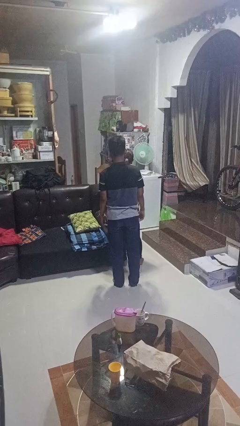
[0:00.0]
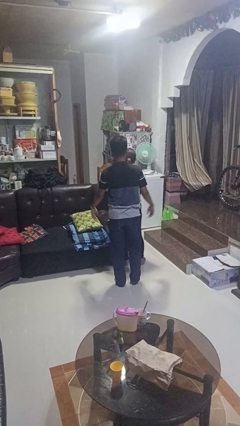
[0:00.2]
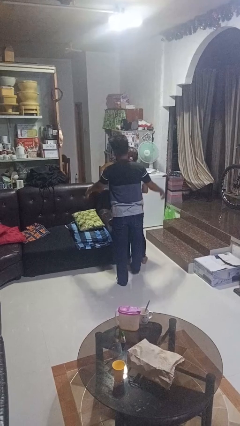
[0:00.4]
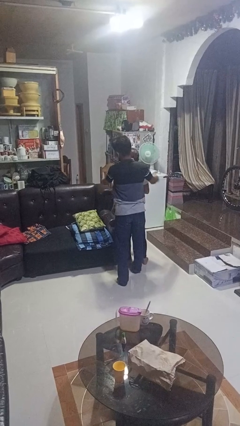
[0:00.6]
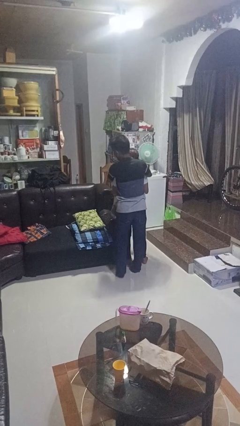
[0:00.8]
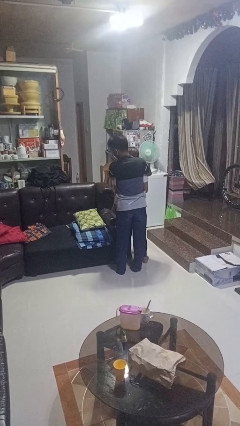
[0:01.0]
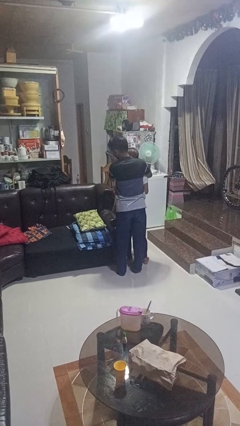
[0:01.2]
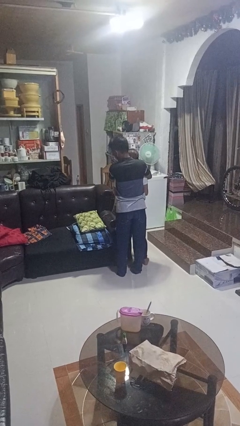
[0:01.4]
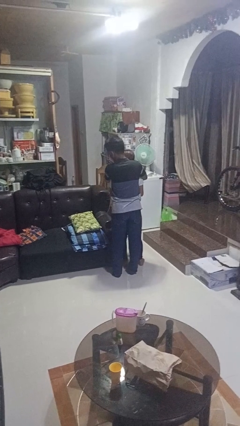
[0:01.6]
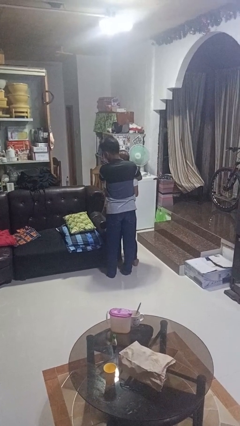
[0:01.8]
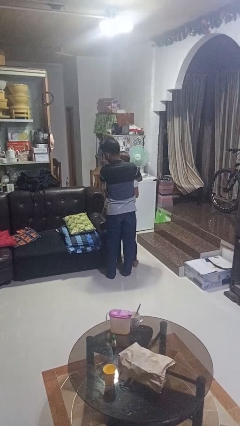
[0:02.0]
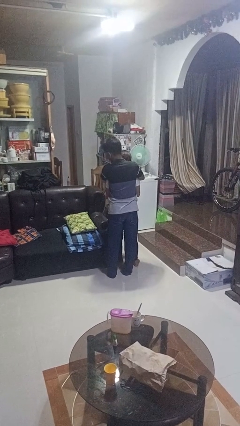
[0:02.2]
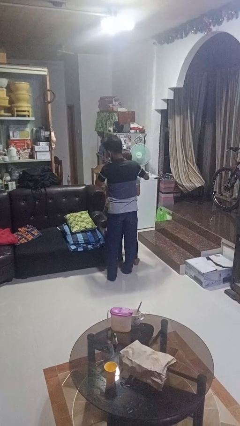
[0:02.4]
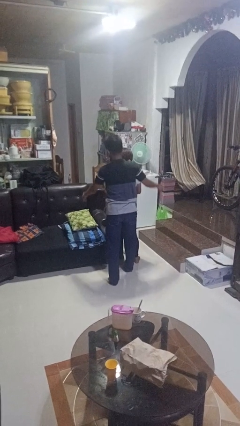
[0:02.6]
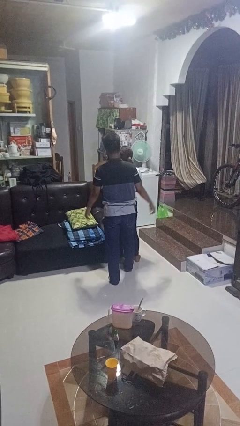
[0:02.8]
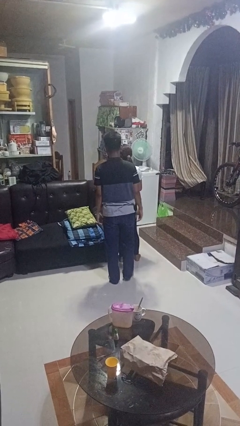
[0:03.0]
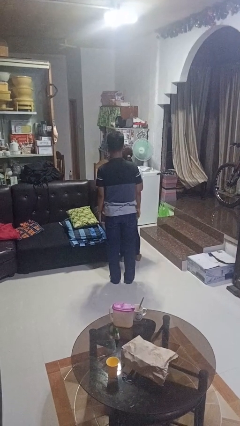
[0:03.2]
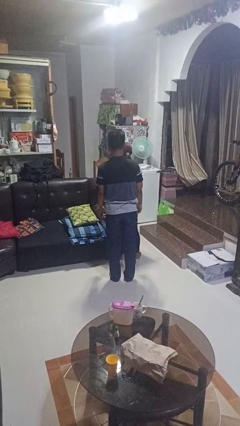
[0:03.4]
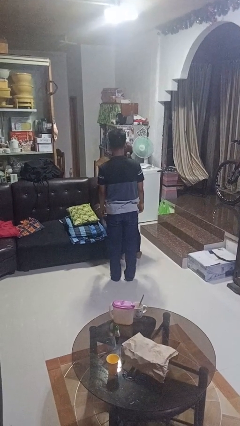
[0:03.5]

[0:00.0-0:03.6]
person hugs person from behind

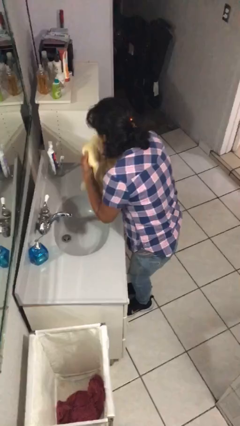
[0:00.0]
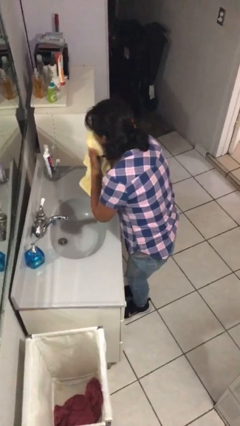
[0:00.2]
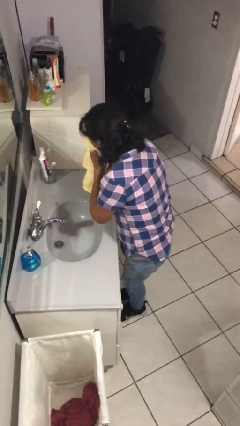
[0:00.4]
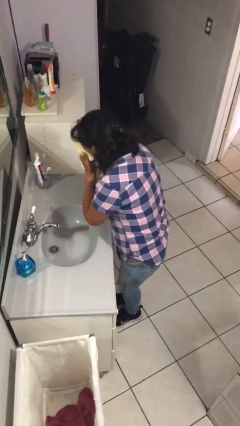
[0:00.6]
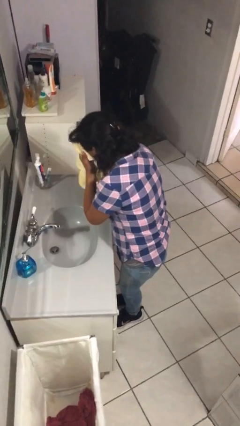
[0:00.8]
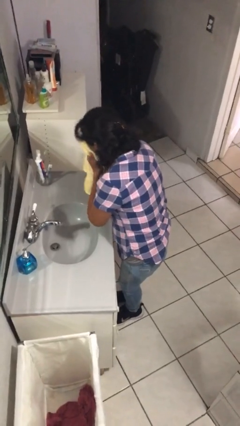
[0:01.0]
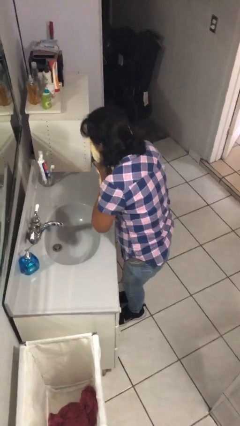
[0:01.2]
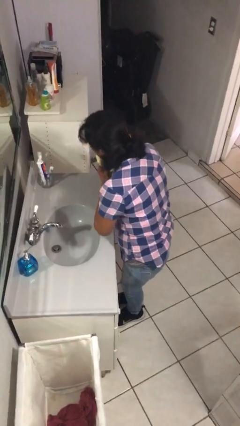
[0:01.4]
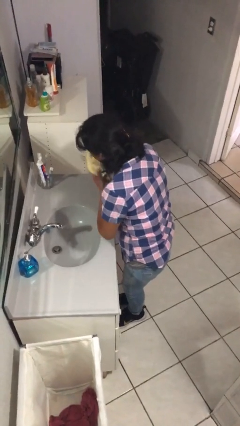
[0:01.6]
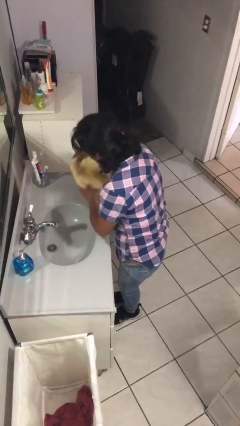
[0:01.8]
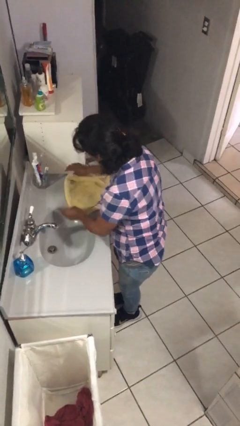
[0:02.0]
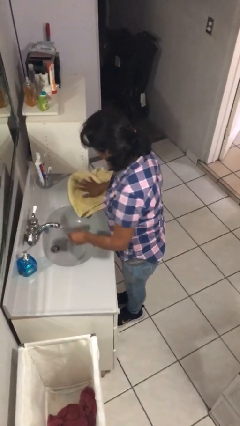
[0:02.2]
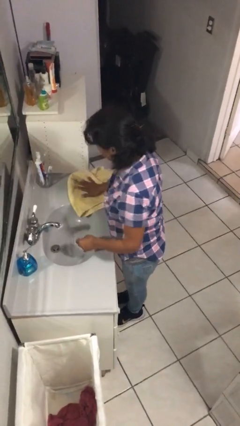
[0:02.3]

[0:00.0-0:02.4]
person dries face with towel

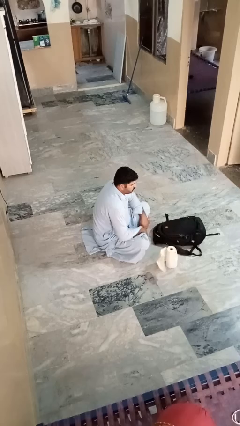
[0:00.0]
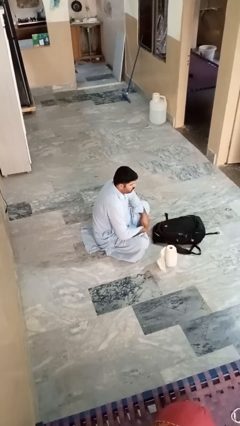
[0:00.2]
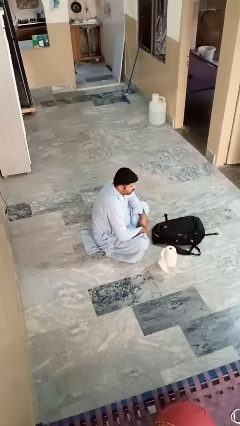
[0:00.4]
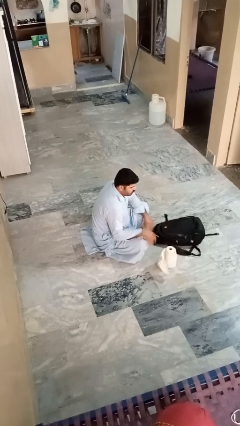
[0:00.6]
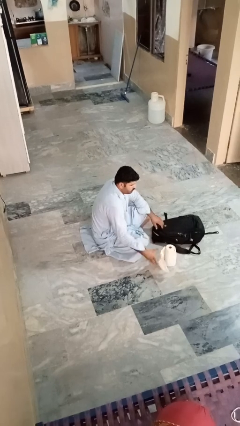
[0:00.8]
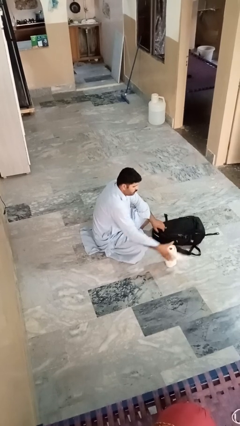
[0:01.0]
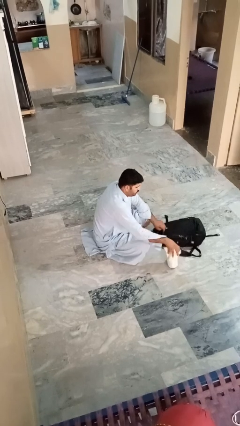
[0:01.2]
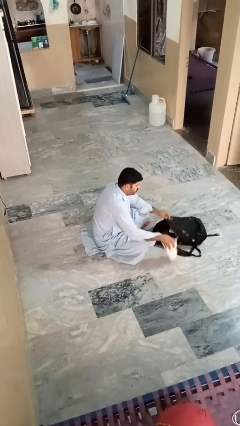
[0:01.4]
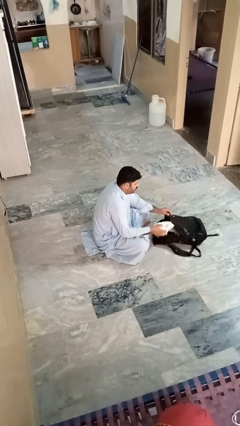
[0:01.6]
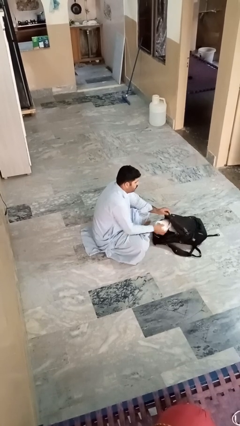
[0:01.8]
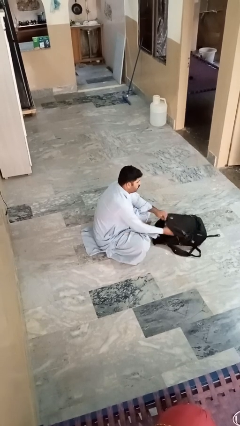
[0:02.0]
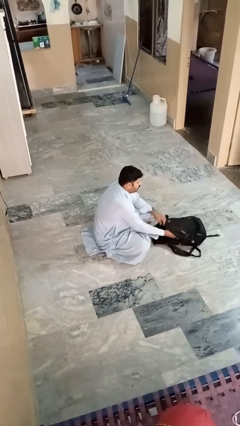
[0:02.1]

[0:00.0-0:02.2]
person puts object into bag

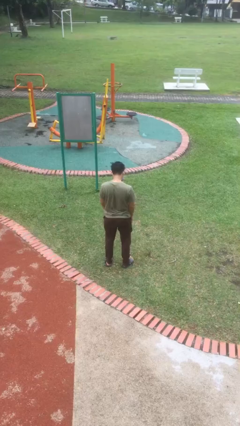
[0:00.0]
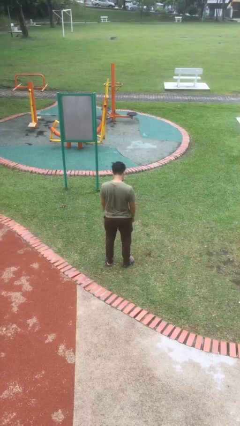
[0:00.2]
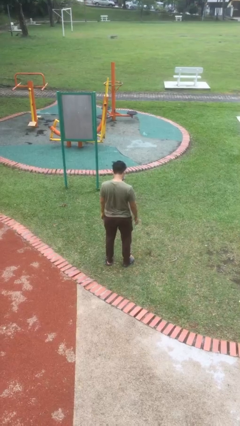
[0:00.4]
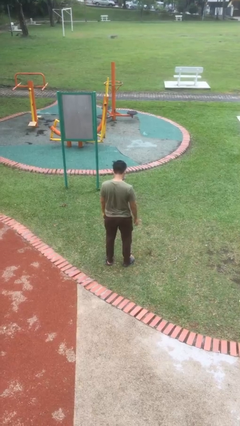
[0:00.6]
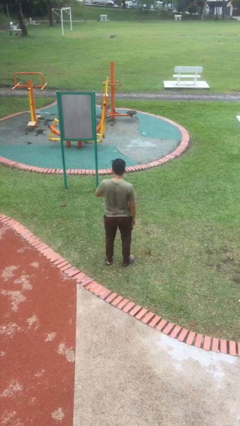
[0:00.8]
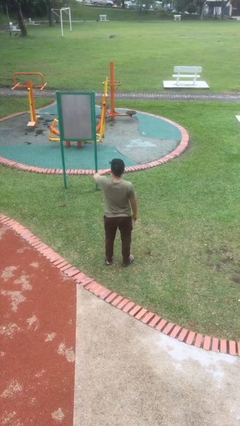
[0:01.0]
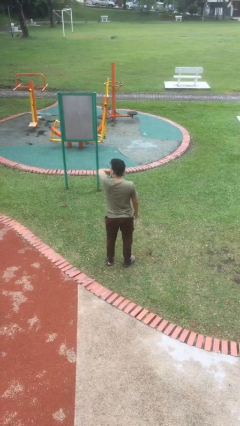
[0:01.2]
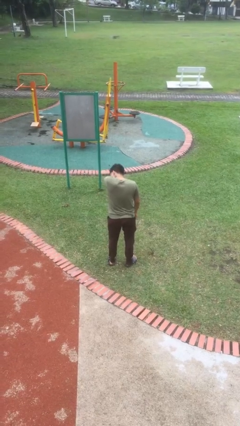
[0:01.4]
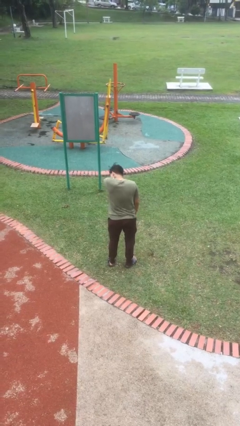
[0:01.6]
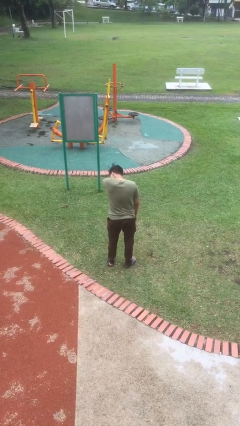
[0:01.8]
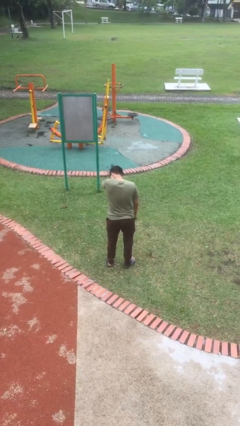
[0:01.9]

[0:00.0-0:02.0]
person sneezes into arm

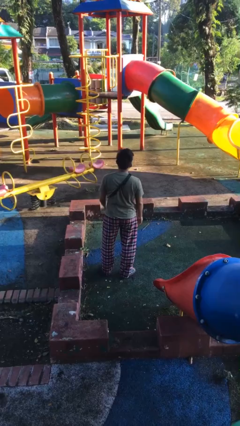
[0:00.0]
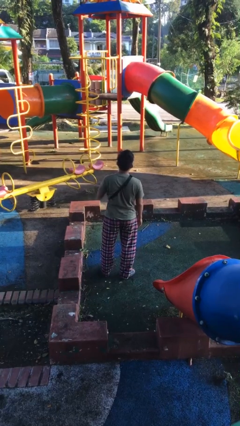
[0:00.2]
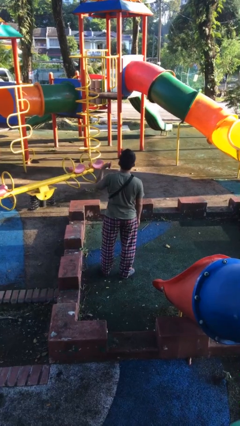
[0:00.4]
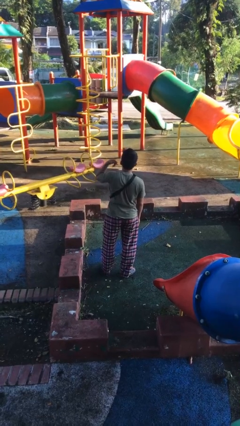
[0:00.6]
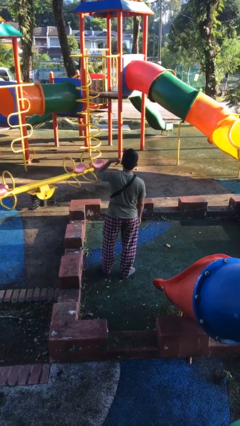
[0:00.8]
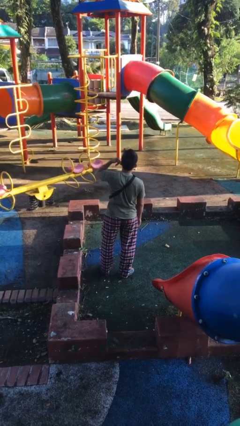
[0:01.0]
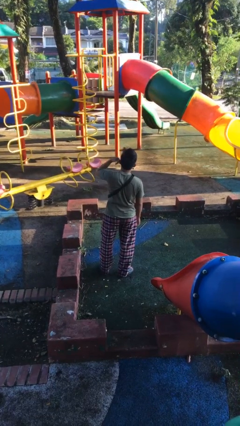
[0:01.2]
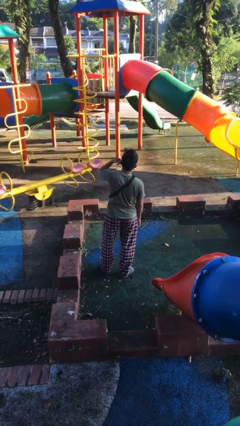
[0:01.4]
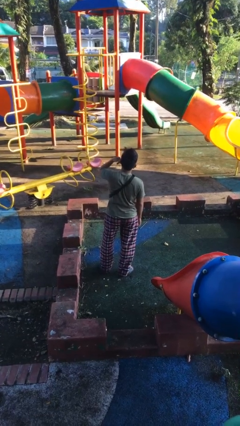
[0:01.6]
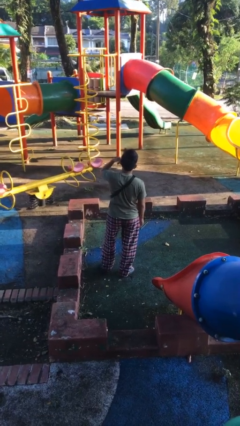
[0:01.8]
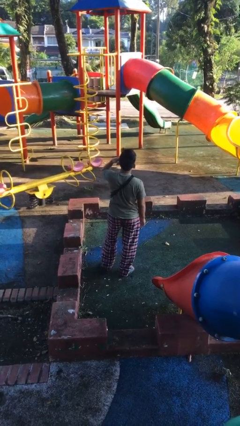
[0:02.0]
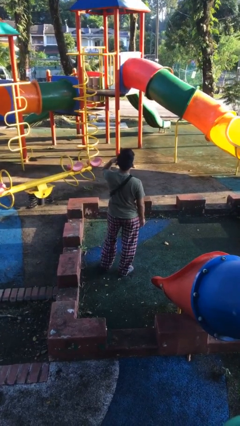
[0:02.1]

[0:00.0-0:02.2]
person gestures call me

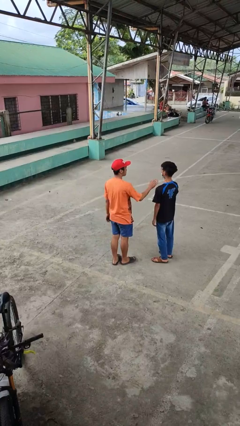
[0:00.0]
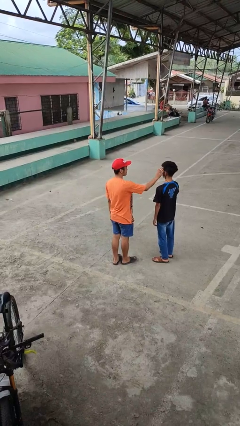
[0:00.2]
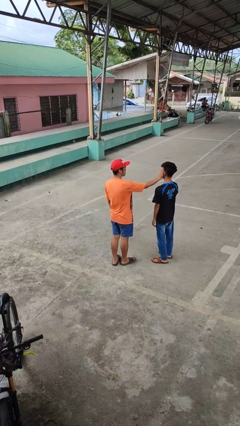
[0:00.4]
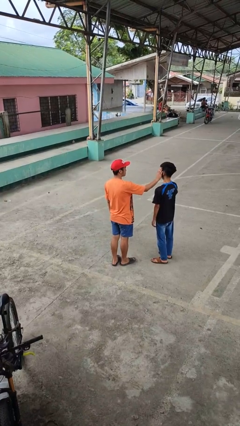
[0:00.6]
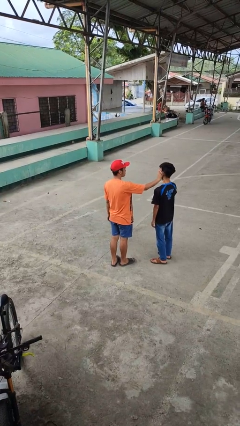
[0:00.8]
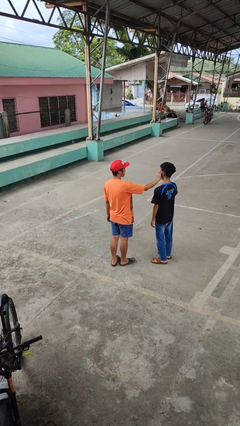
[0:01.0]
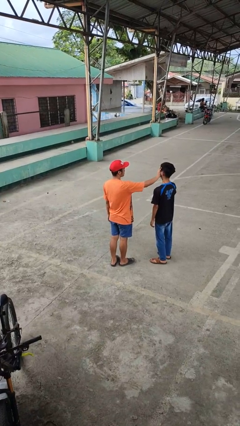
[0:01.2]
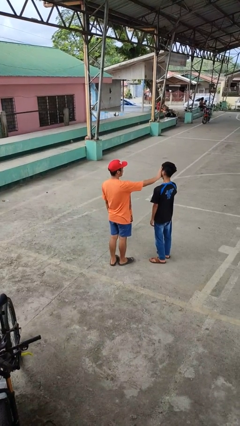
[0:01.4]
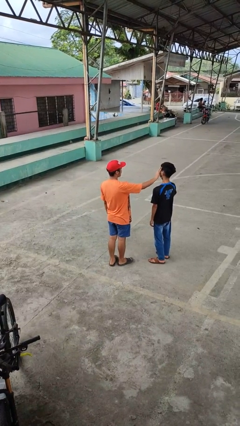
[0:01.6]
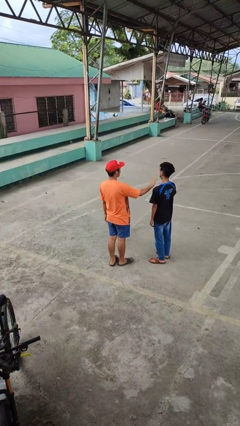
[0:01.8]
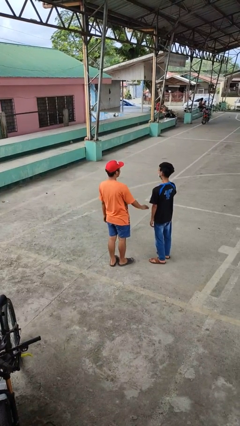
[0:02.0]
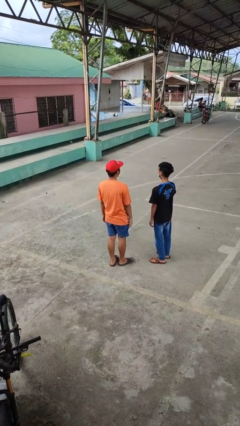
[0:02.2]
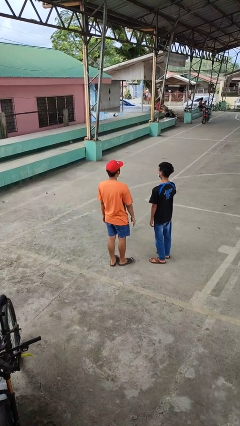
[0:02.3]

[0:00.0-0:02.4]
person touches face of person

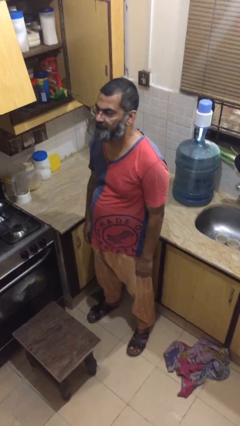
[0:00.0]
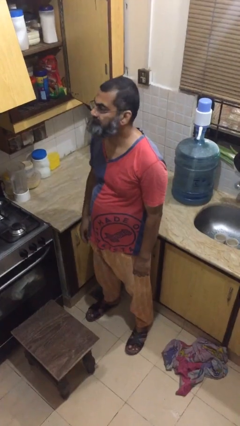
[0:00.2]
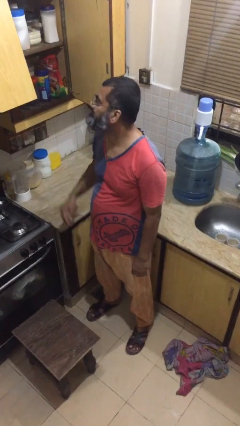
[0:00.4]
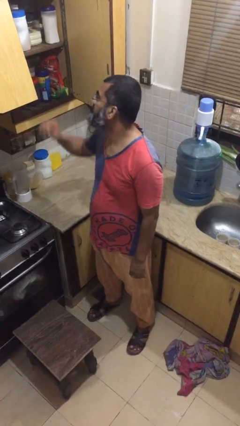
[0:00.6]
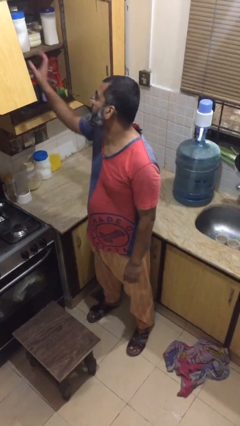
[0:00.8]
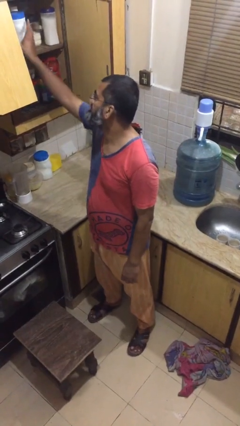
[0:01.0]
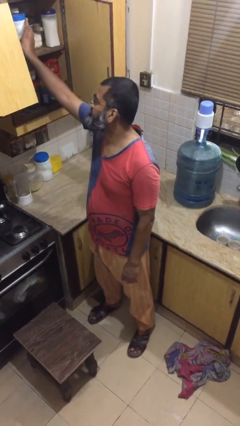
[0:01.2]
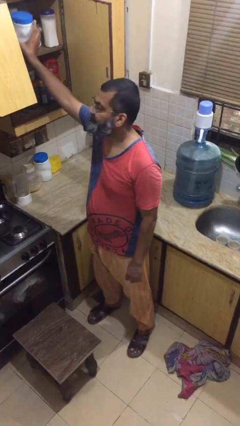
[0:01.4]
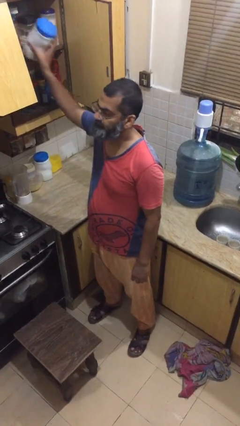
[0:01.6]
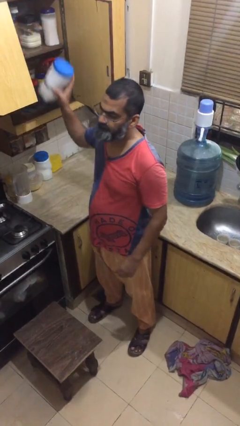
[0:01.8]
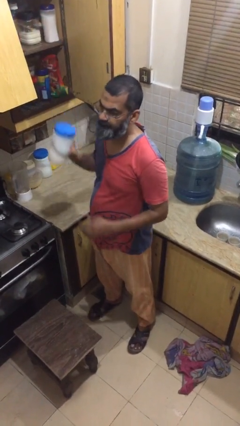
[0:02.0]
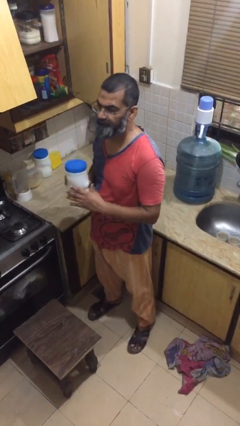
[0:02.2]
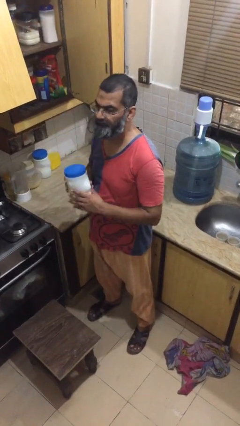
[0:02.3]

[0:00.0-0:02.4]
person picks up object from shelf
